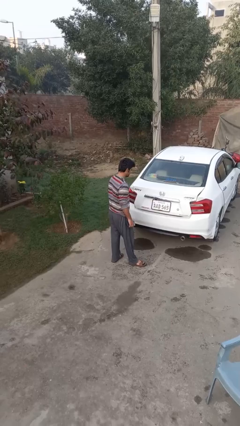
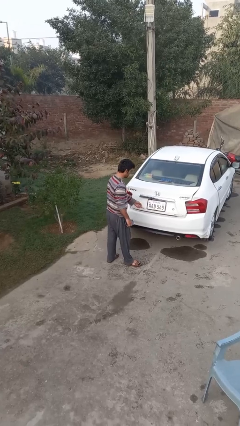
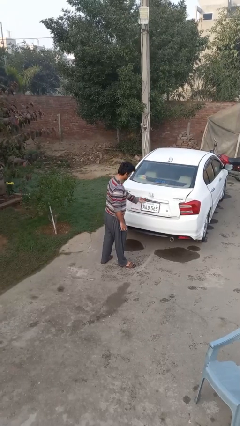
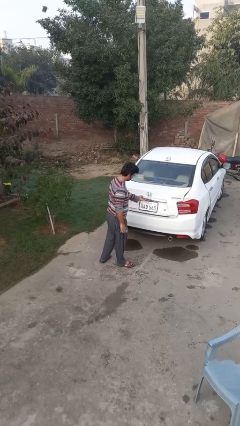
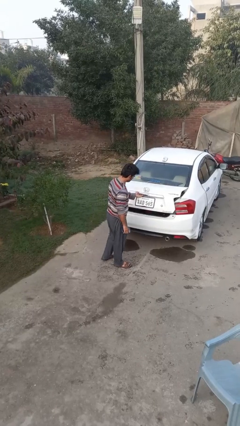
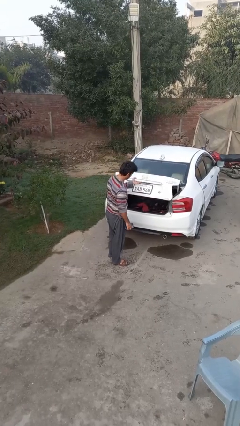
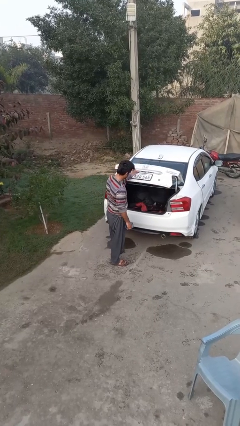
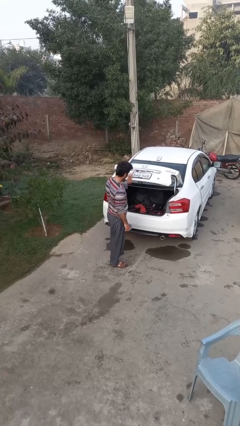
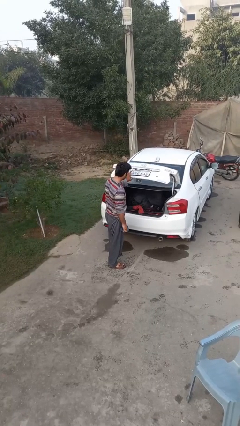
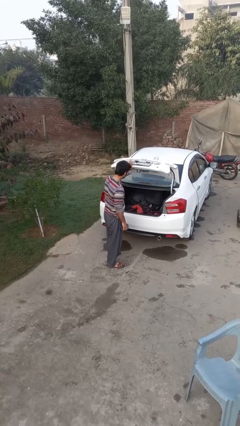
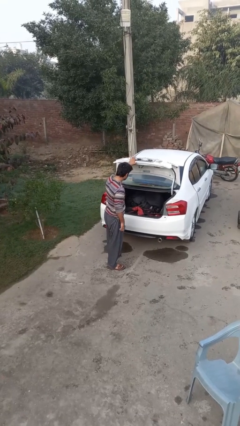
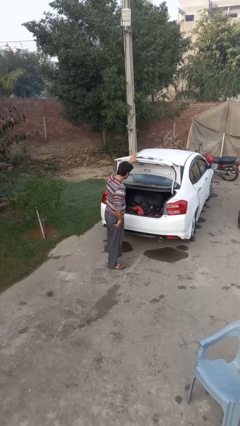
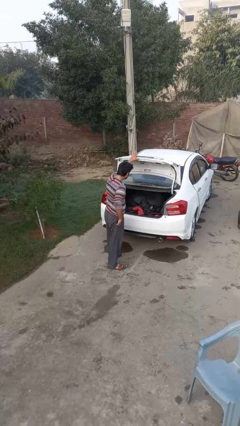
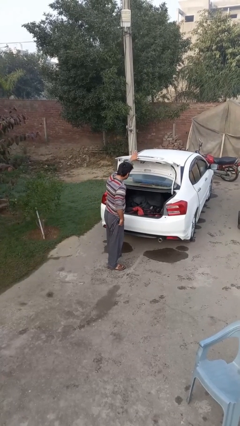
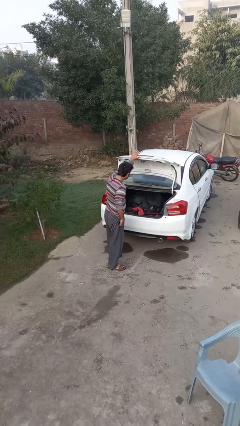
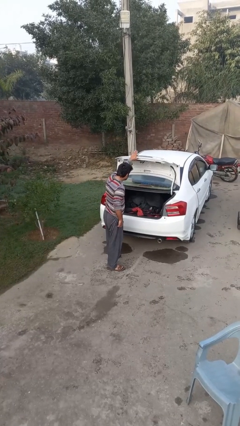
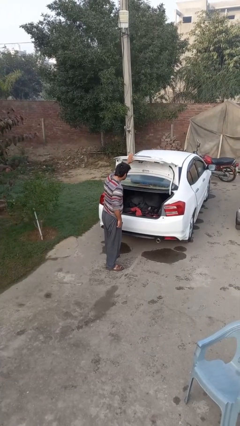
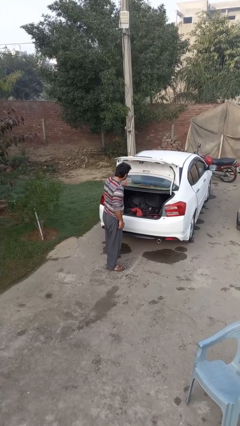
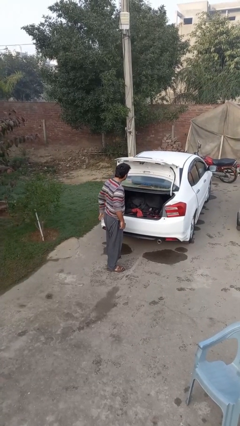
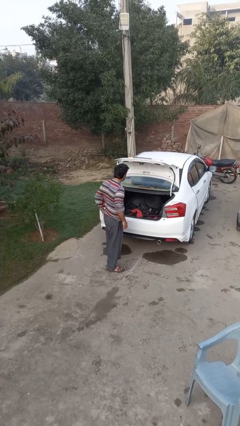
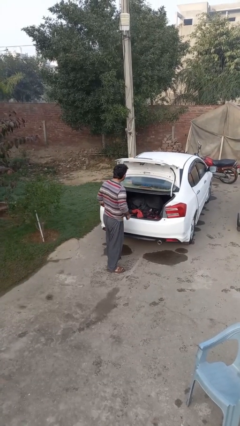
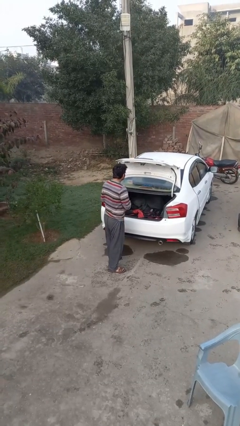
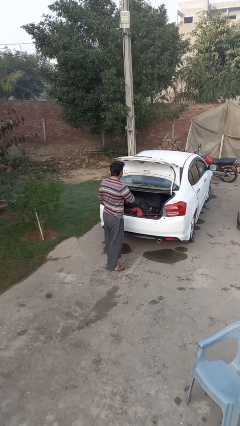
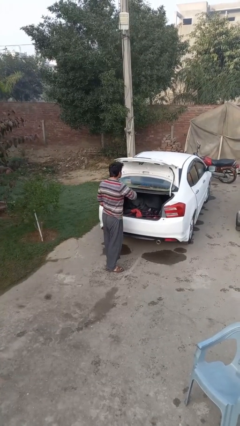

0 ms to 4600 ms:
person opens car trunk

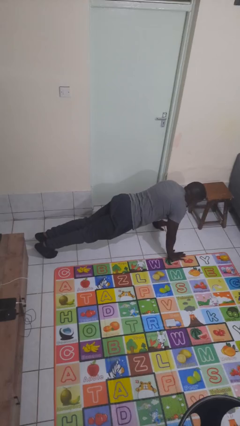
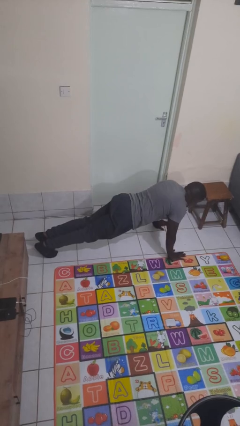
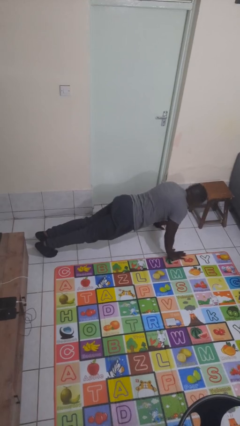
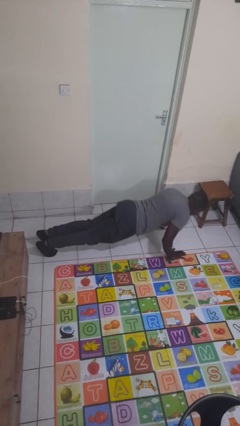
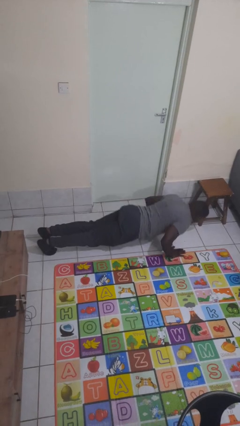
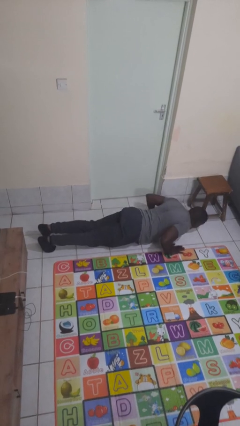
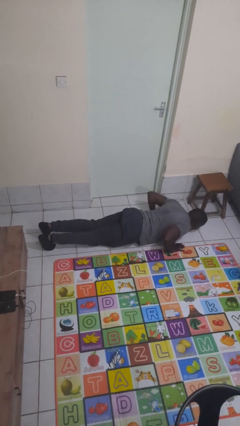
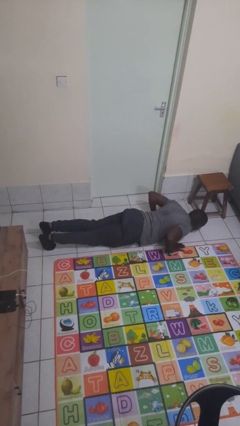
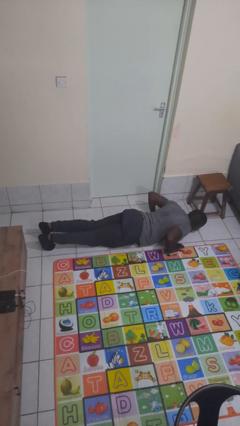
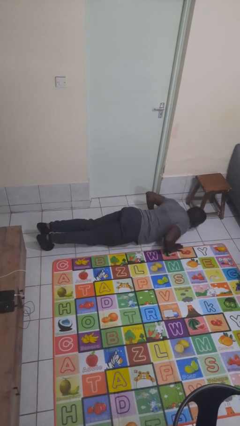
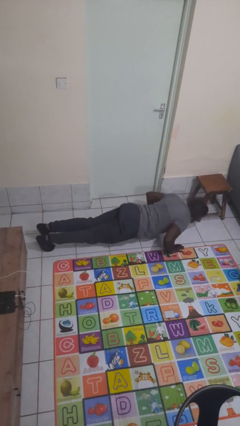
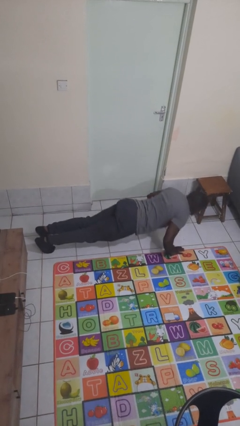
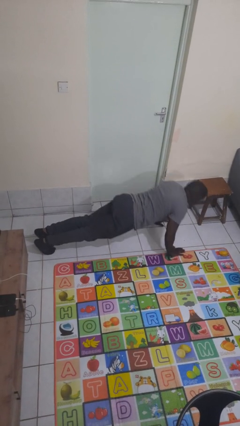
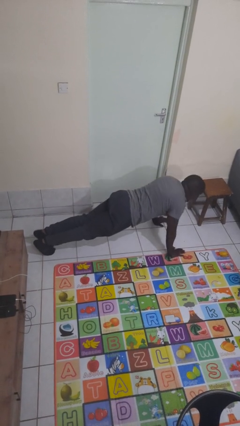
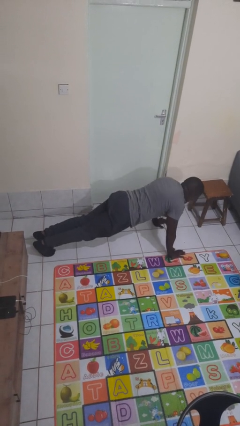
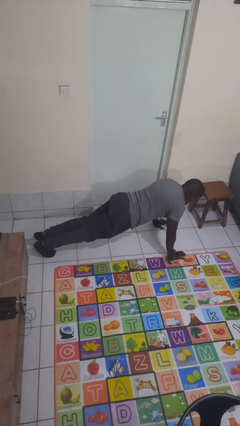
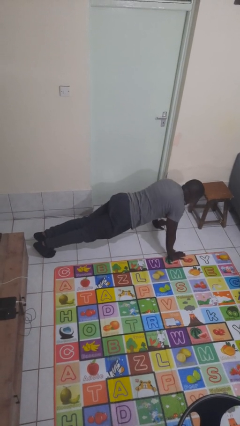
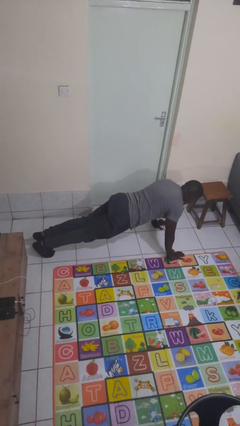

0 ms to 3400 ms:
person exercises with pushup

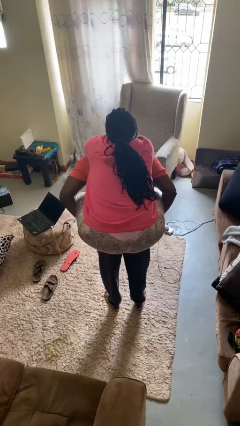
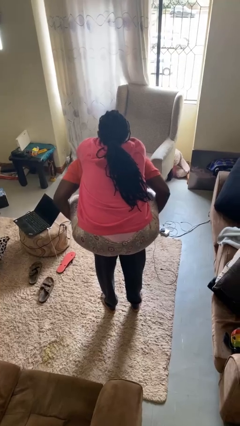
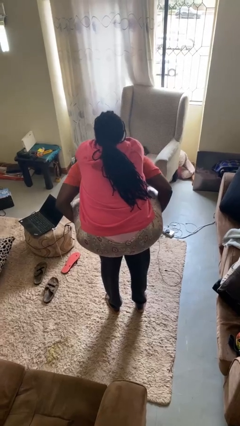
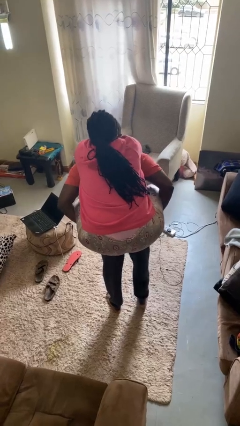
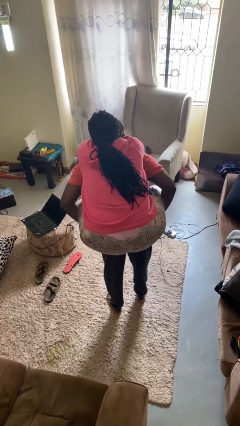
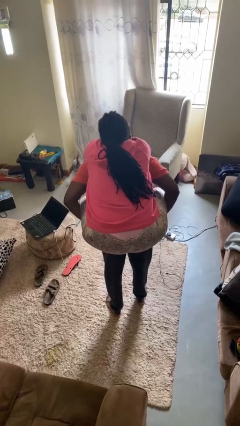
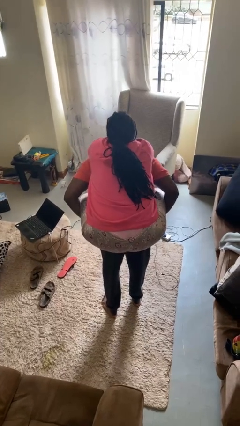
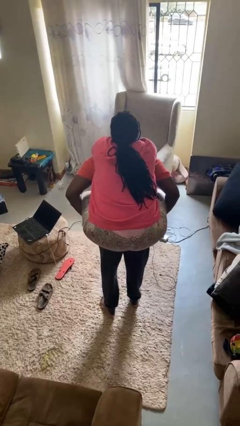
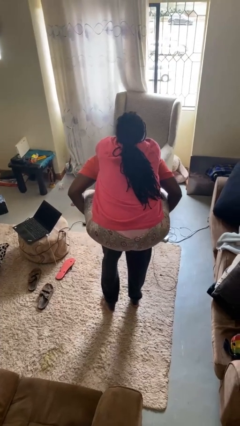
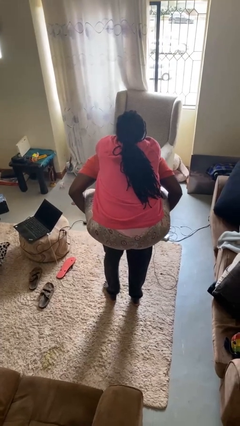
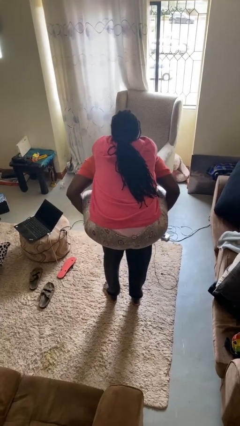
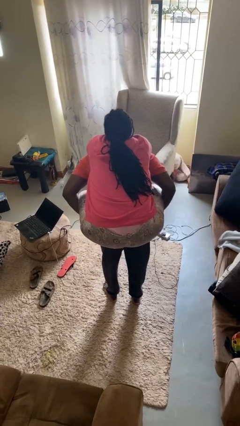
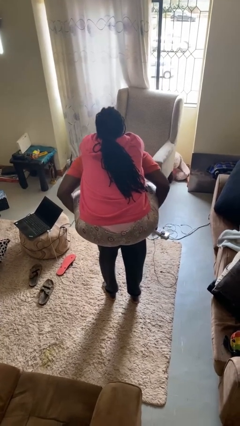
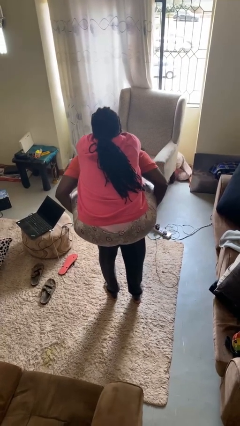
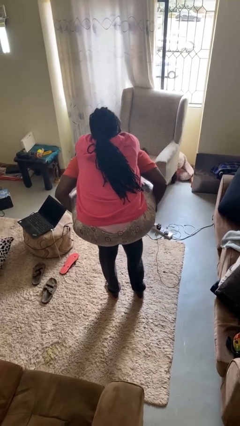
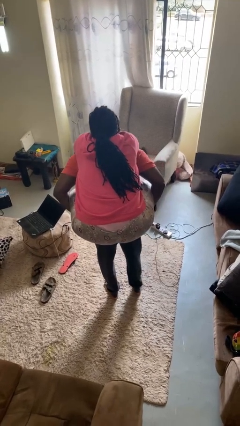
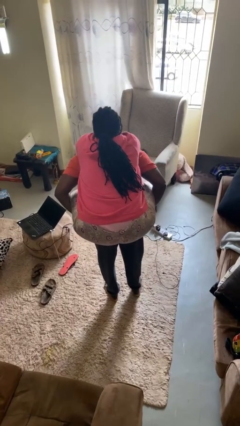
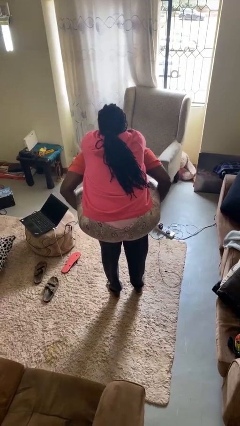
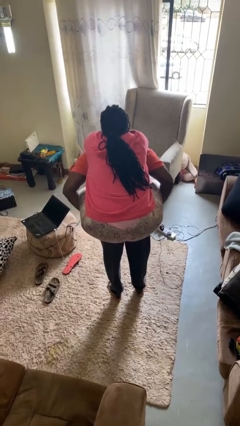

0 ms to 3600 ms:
person carries person on back

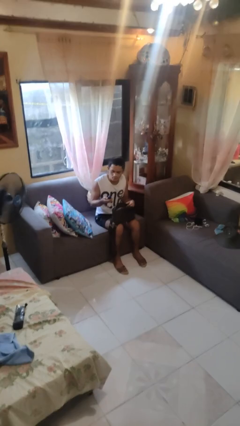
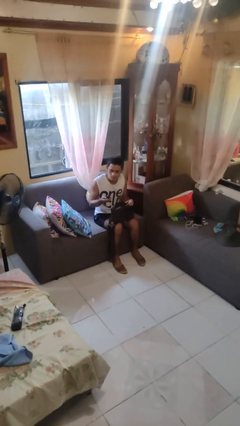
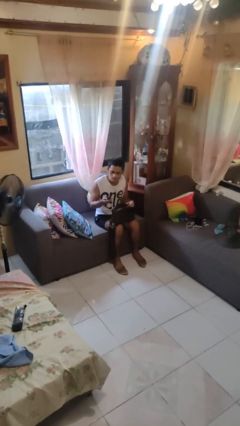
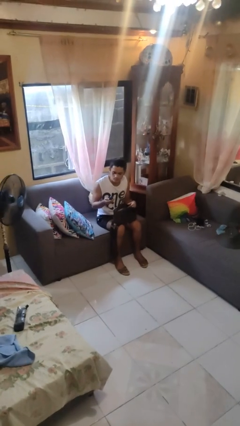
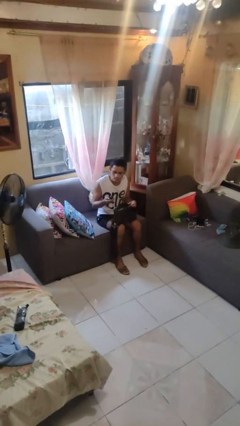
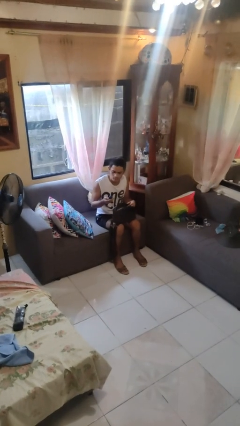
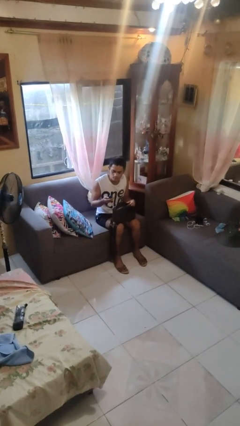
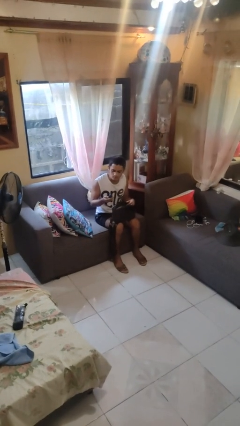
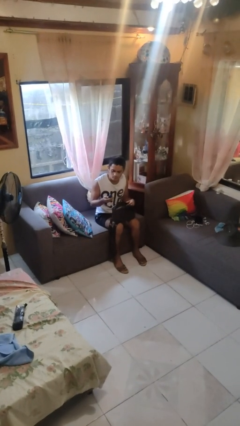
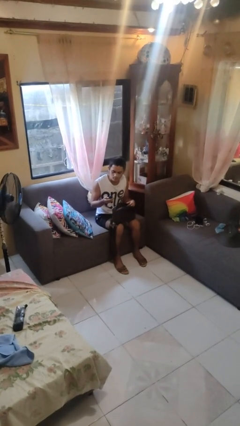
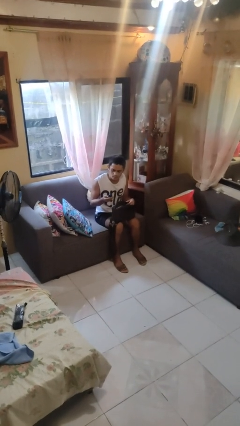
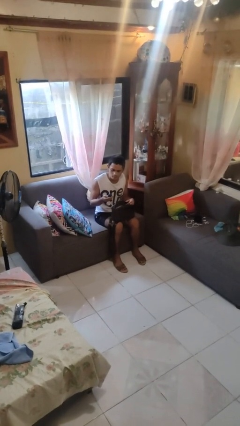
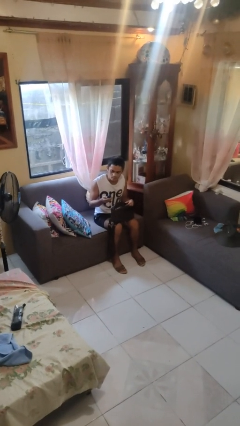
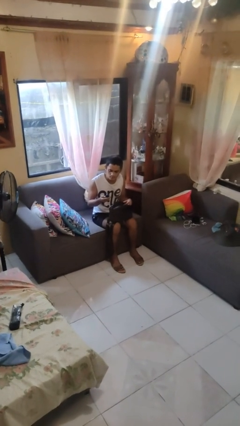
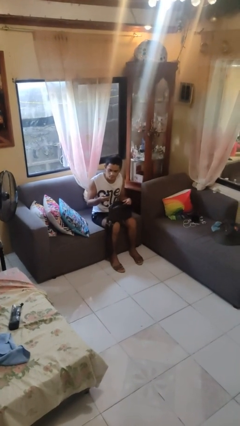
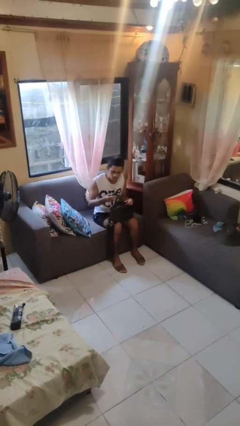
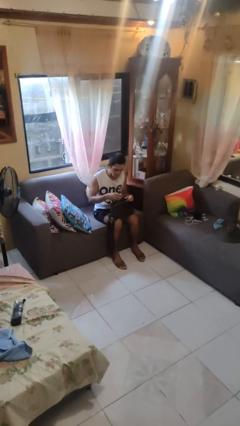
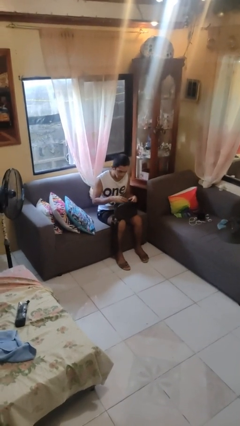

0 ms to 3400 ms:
person takes object from purse

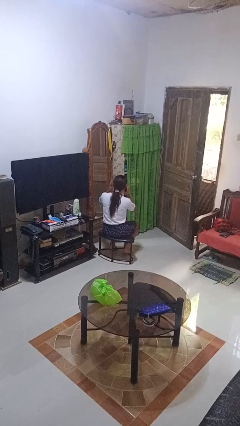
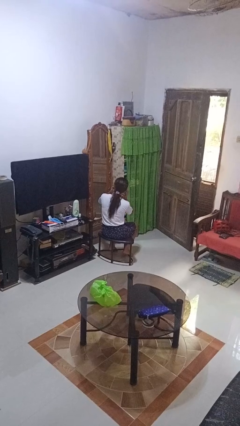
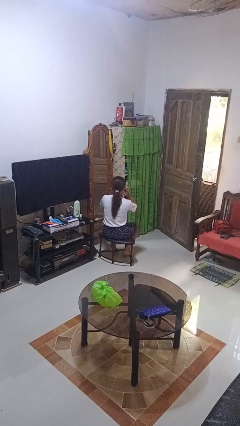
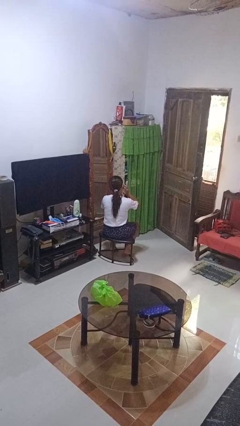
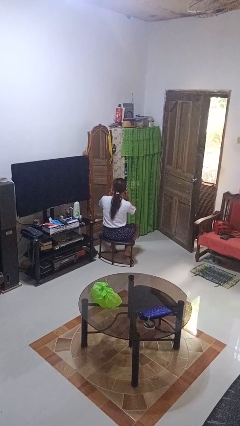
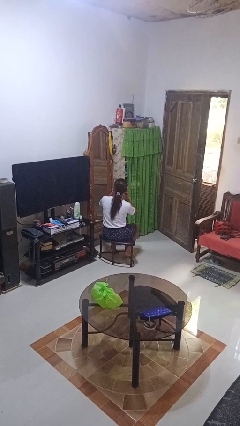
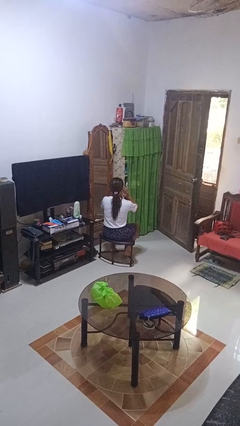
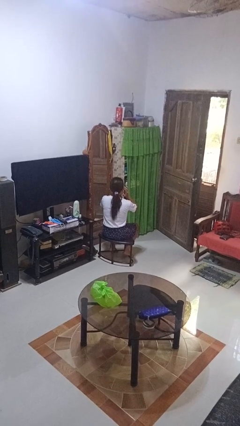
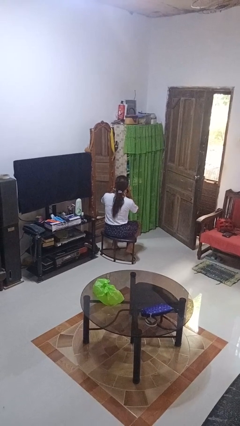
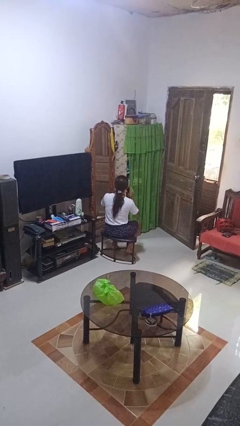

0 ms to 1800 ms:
person puts fingers in ear

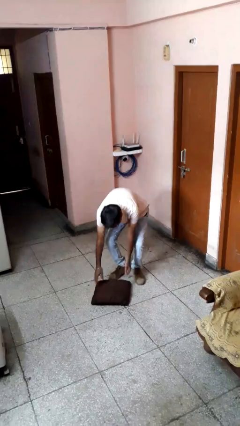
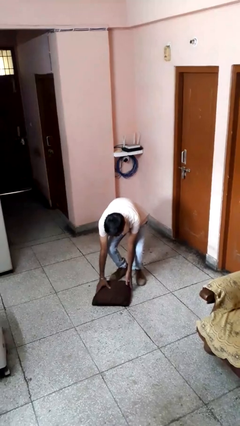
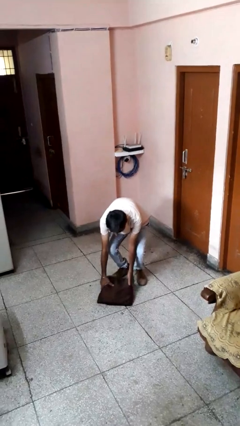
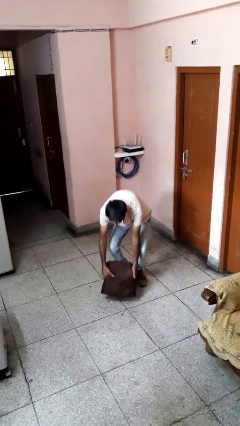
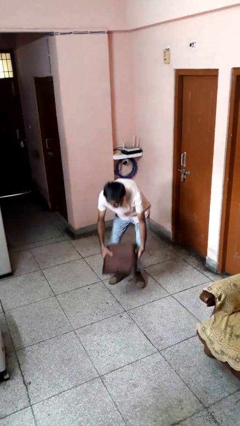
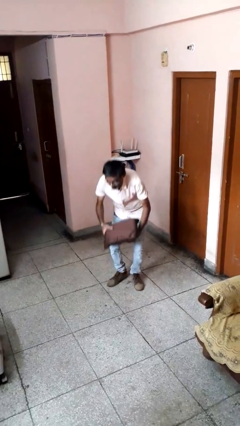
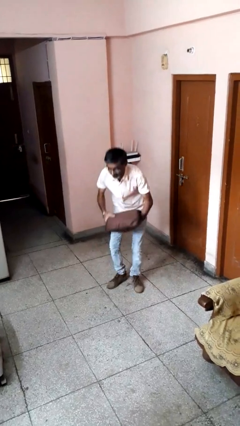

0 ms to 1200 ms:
person picks up object from floor
